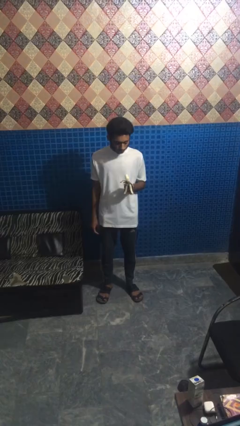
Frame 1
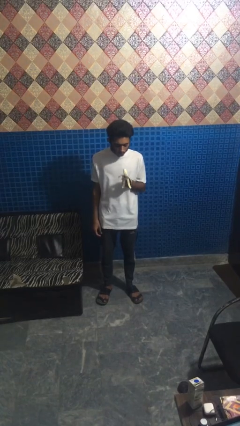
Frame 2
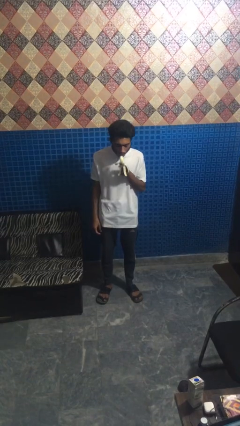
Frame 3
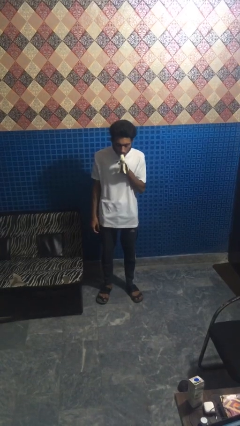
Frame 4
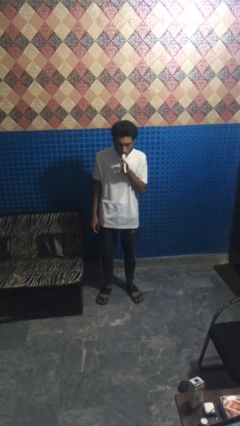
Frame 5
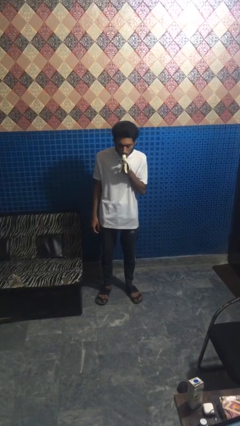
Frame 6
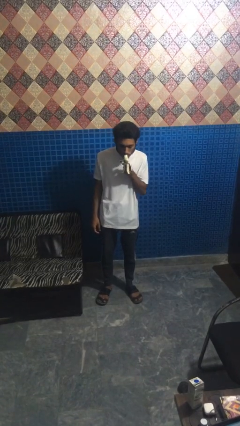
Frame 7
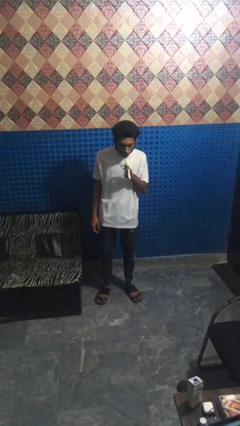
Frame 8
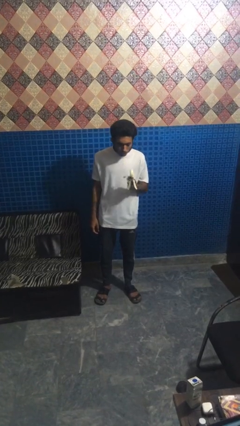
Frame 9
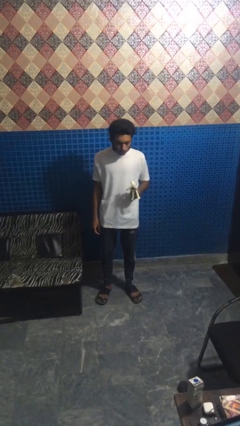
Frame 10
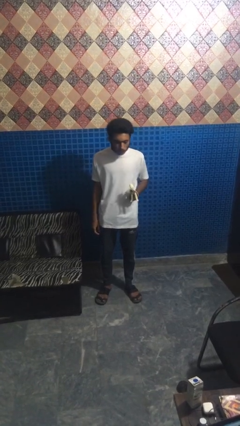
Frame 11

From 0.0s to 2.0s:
person eats banana

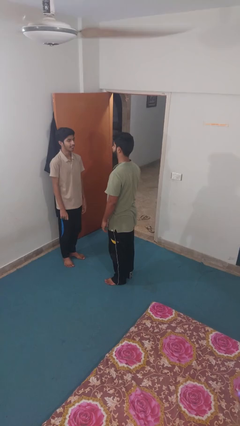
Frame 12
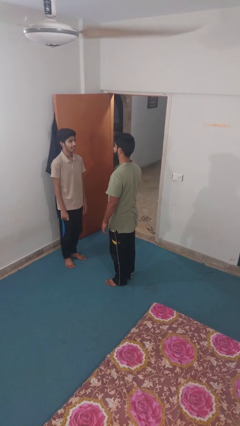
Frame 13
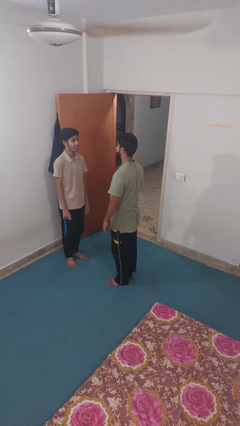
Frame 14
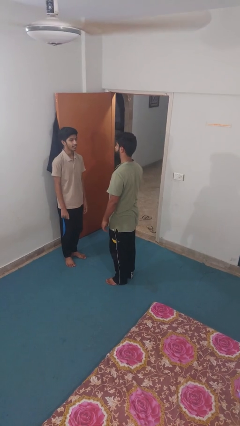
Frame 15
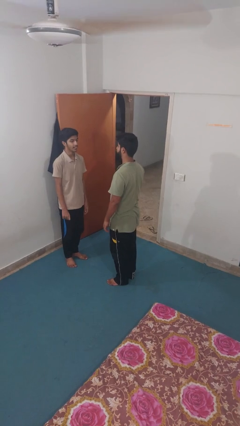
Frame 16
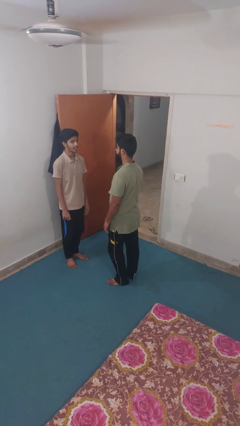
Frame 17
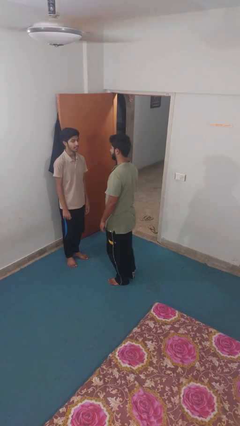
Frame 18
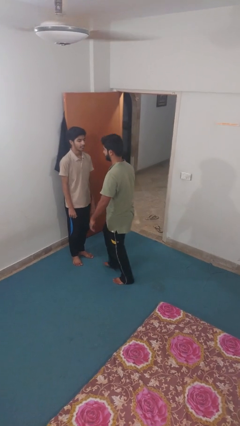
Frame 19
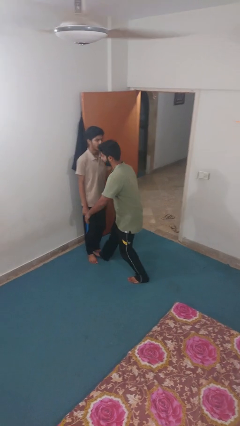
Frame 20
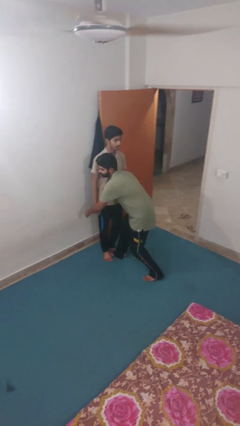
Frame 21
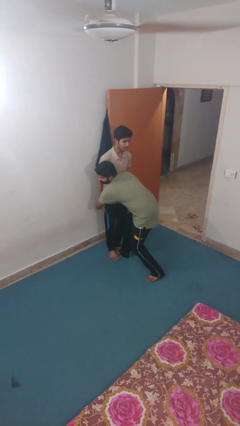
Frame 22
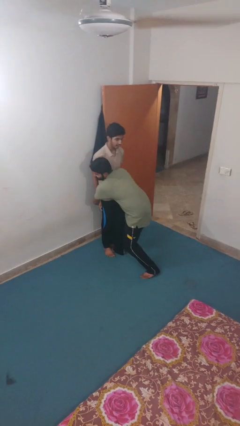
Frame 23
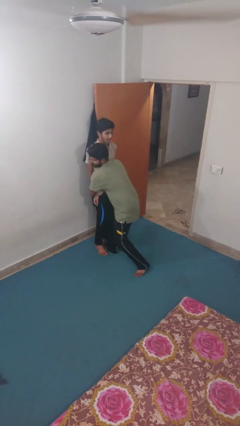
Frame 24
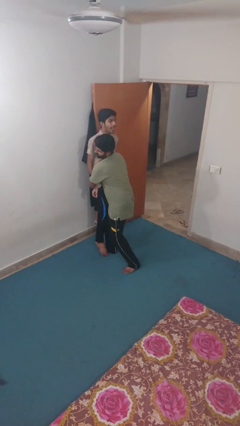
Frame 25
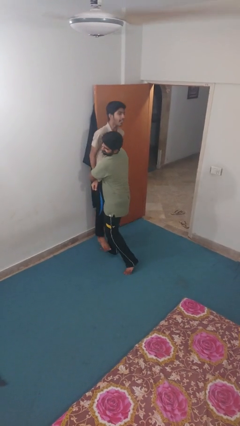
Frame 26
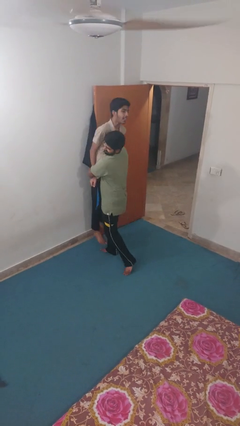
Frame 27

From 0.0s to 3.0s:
person picks up person

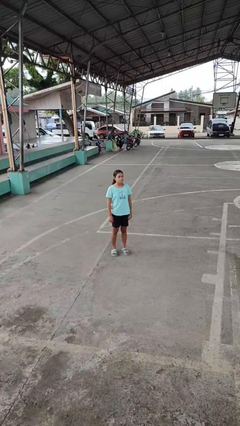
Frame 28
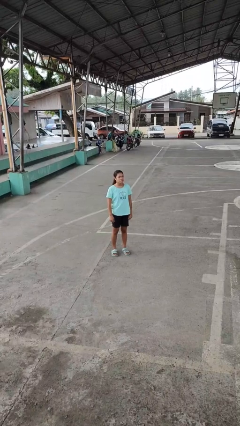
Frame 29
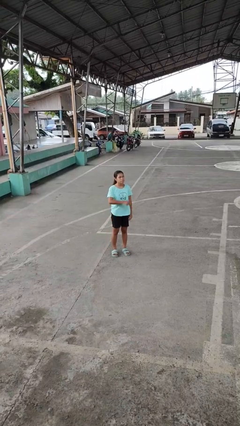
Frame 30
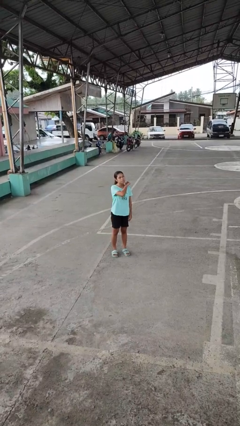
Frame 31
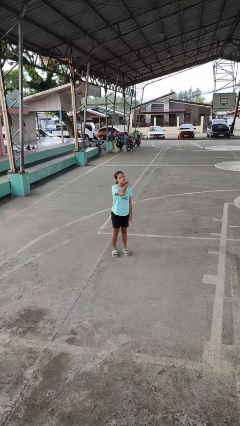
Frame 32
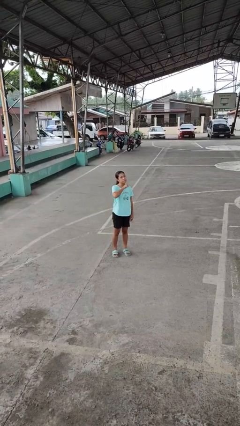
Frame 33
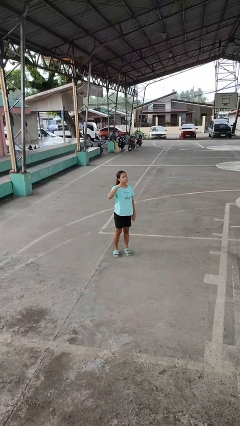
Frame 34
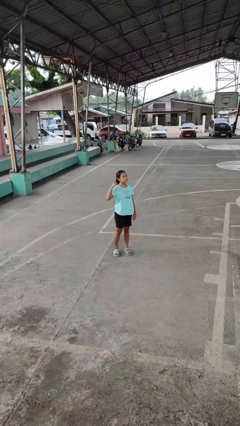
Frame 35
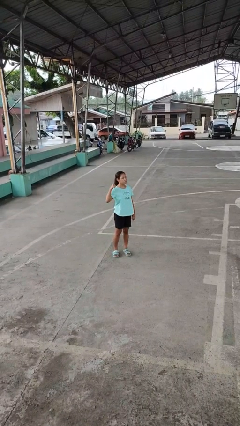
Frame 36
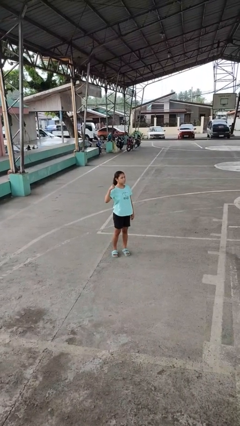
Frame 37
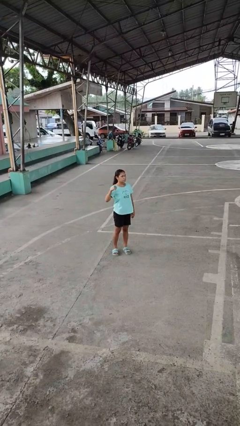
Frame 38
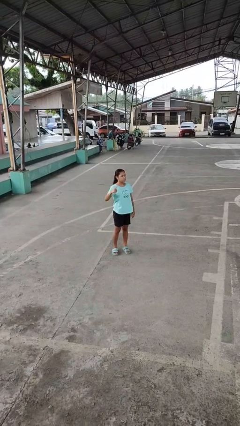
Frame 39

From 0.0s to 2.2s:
person gestures cut

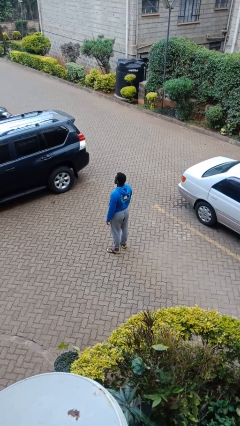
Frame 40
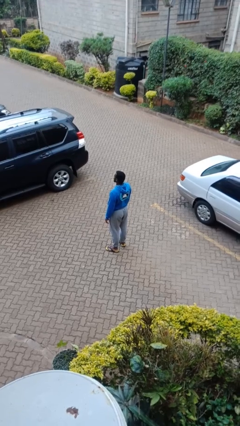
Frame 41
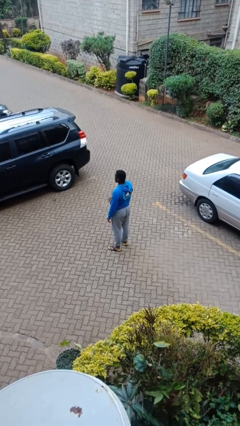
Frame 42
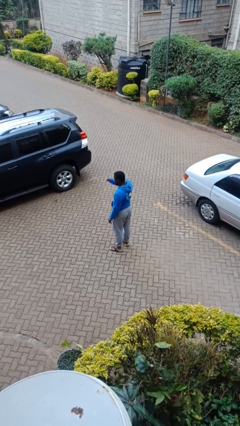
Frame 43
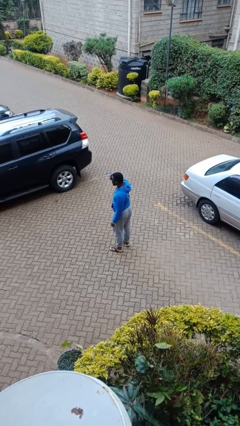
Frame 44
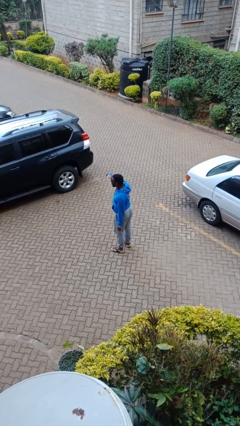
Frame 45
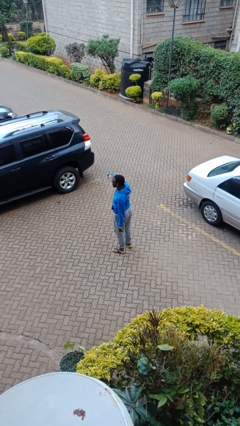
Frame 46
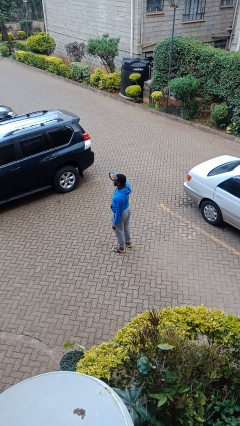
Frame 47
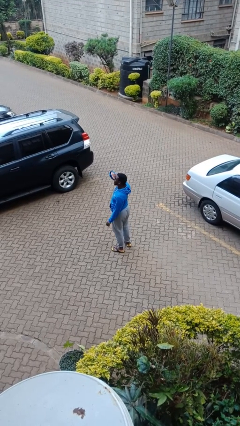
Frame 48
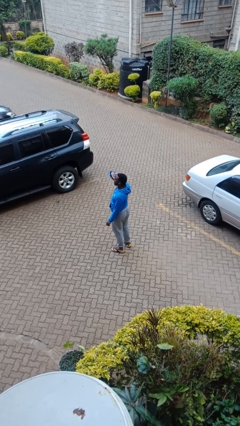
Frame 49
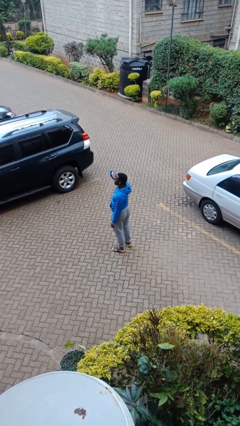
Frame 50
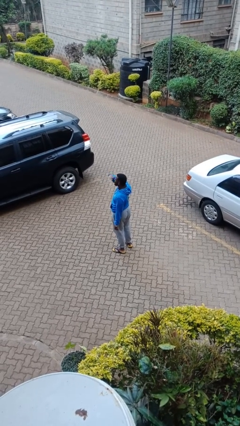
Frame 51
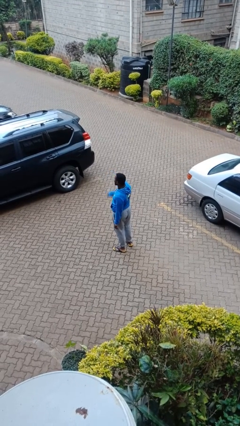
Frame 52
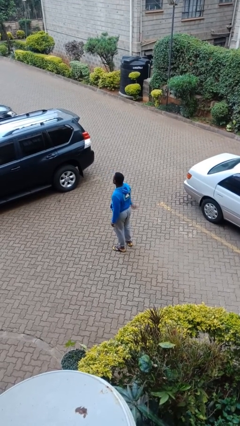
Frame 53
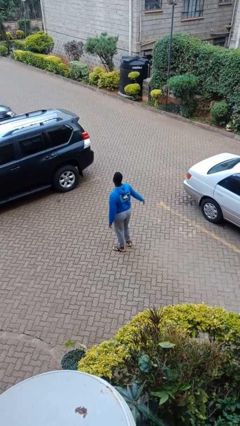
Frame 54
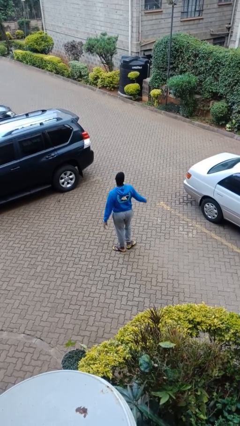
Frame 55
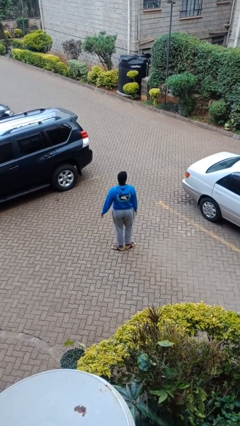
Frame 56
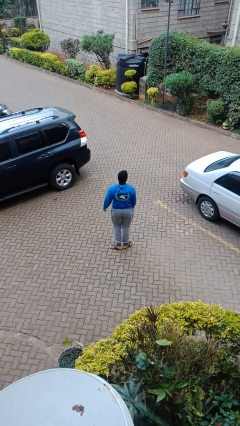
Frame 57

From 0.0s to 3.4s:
person shades eyes

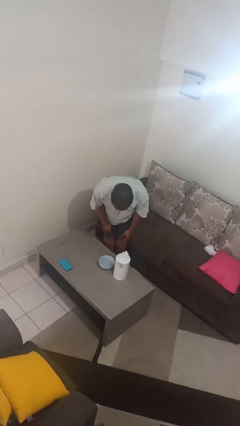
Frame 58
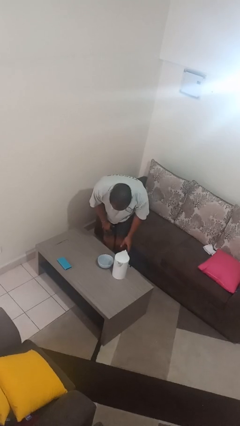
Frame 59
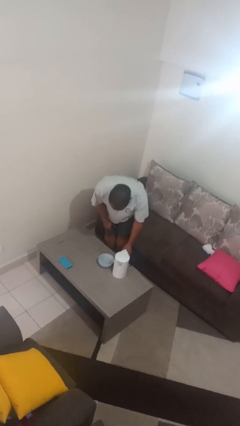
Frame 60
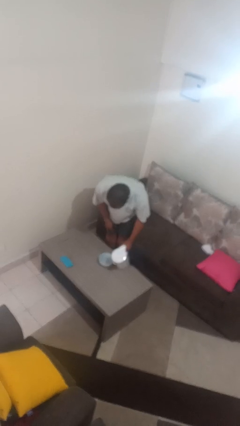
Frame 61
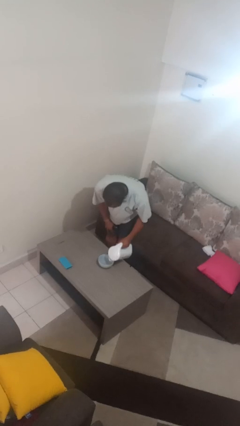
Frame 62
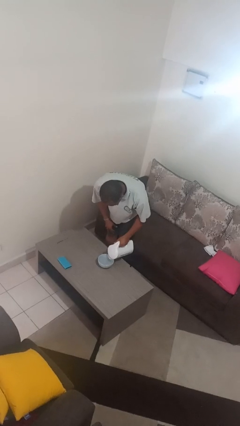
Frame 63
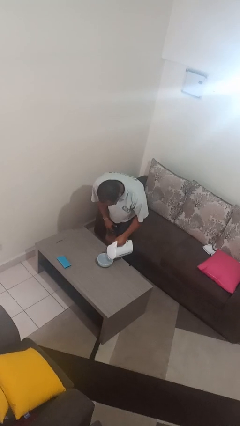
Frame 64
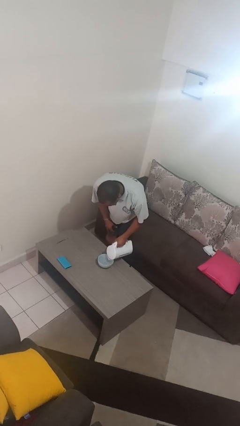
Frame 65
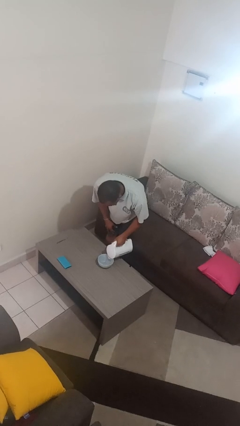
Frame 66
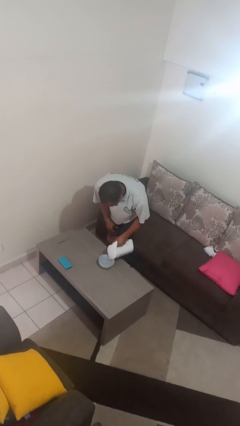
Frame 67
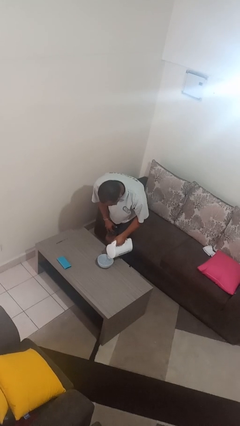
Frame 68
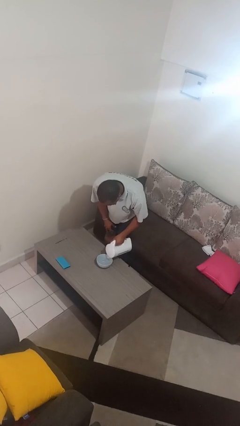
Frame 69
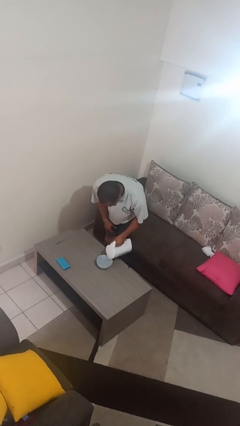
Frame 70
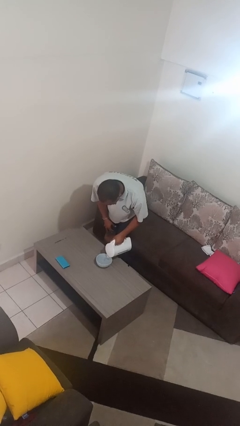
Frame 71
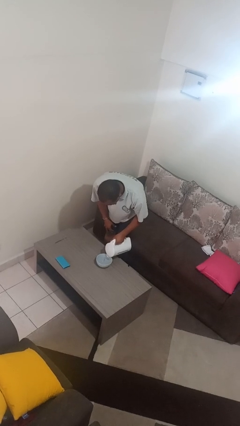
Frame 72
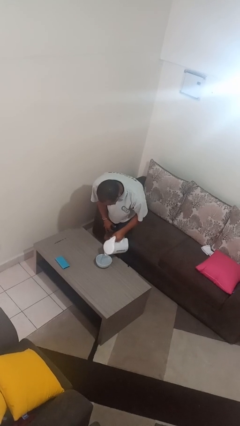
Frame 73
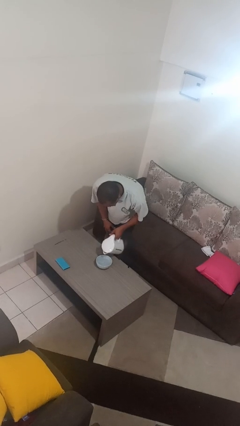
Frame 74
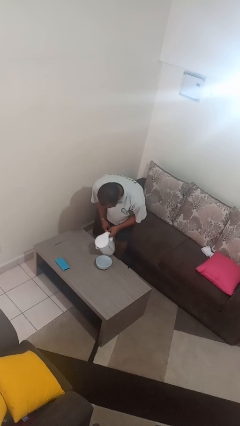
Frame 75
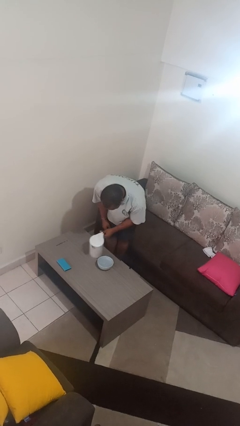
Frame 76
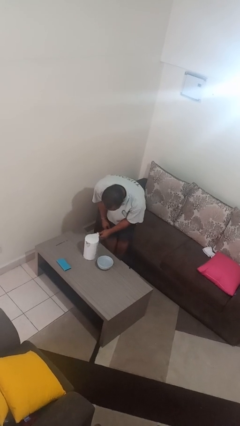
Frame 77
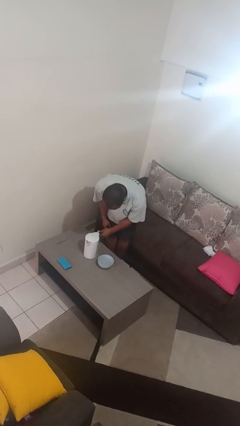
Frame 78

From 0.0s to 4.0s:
person pours into bowl

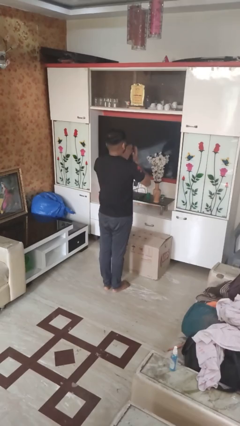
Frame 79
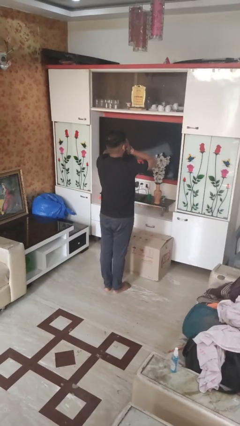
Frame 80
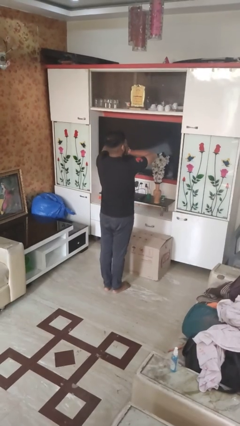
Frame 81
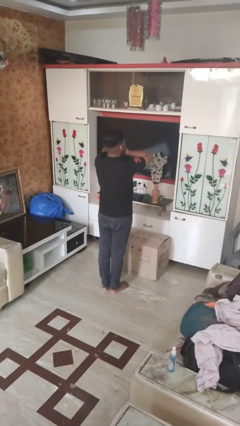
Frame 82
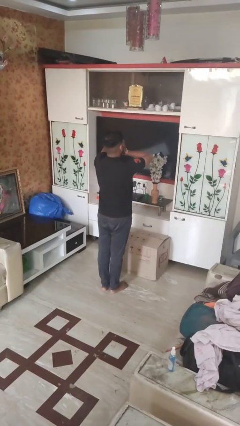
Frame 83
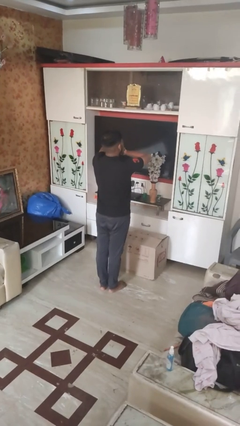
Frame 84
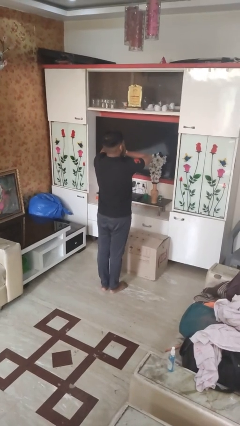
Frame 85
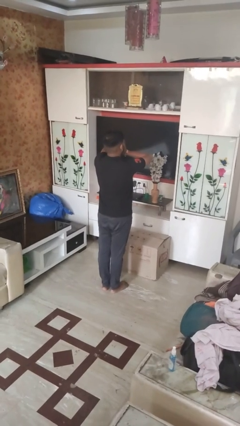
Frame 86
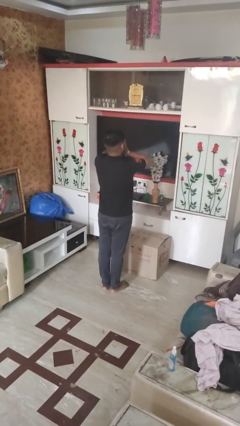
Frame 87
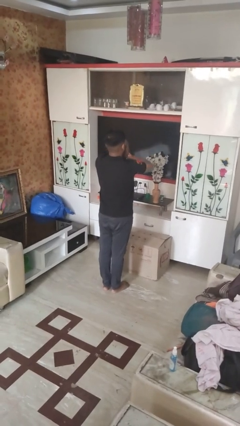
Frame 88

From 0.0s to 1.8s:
person covers face with hands

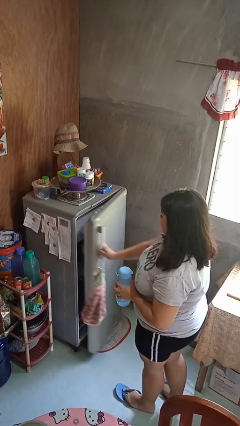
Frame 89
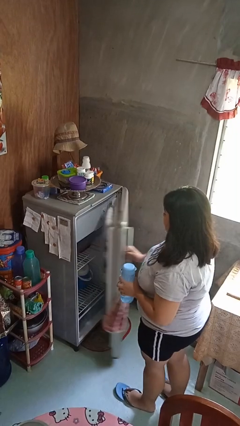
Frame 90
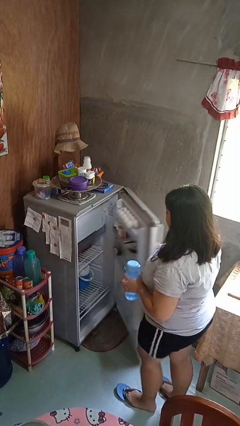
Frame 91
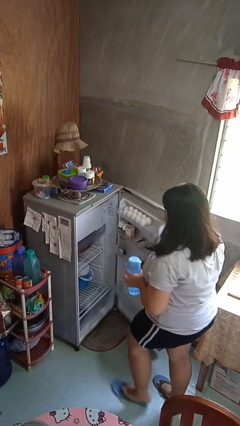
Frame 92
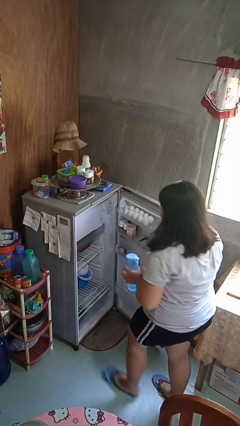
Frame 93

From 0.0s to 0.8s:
person opens refrigerator
